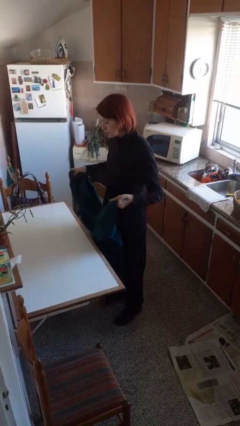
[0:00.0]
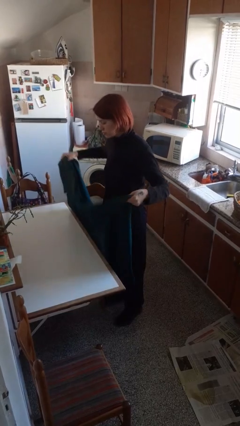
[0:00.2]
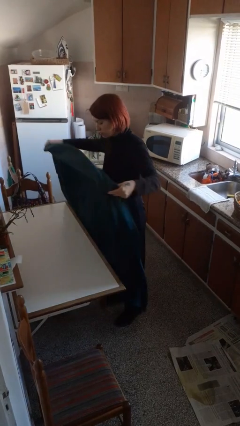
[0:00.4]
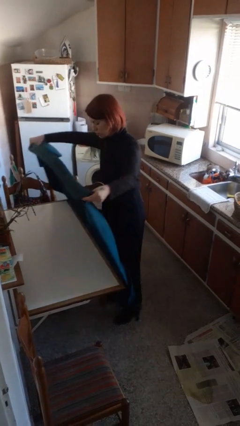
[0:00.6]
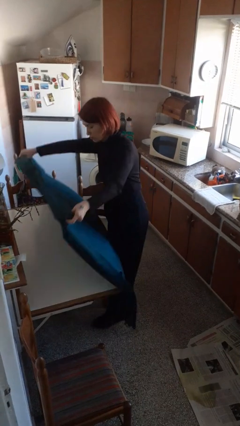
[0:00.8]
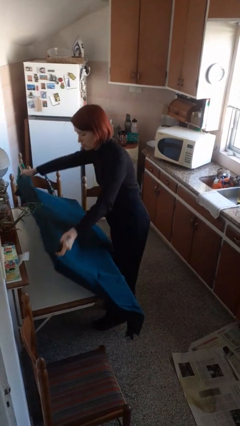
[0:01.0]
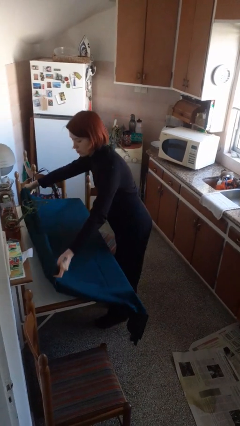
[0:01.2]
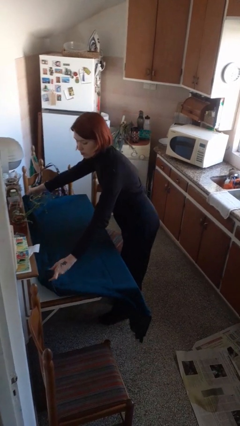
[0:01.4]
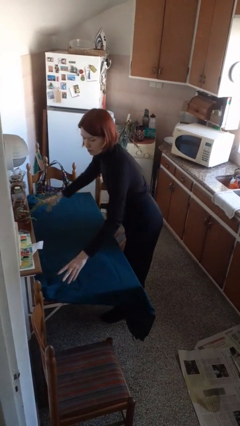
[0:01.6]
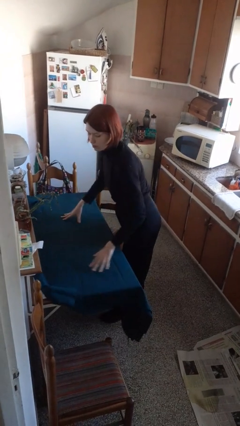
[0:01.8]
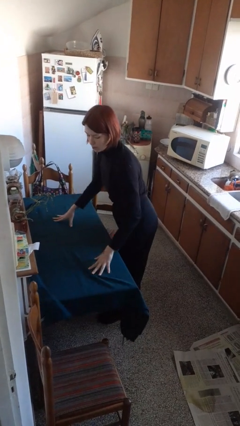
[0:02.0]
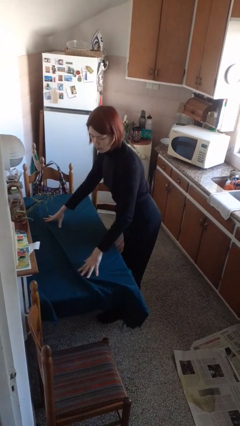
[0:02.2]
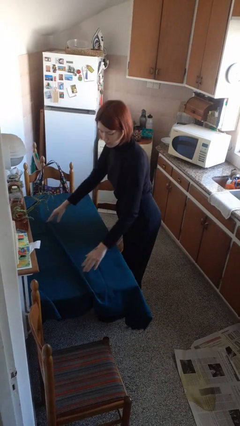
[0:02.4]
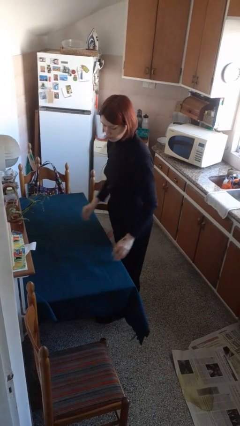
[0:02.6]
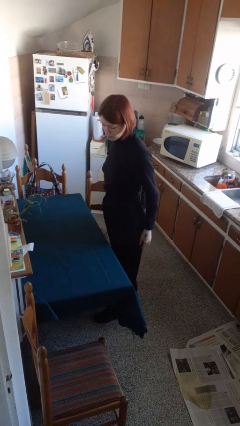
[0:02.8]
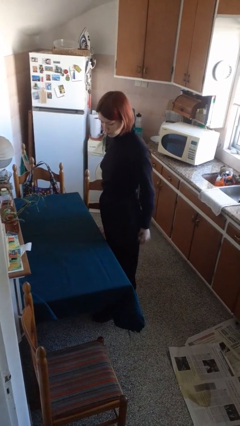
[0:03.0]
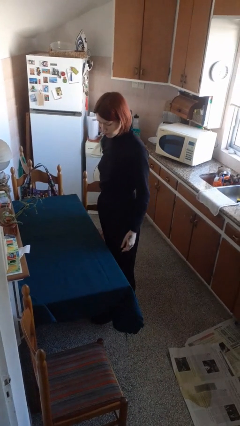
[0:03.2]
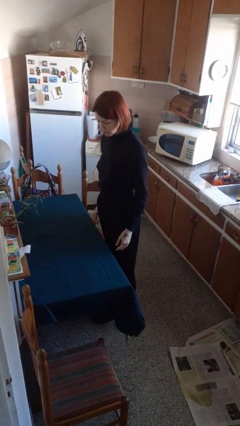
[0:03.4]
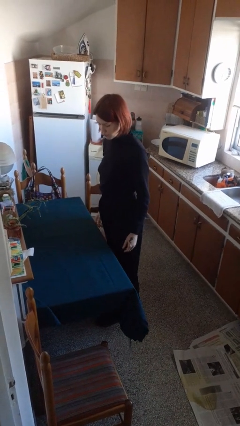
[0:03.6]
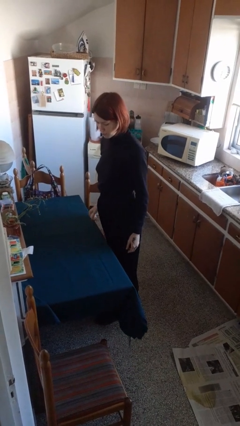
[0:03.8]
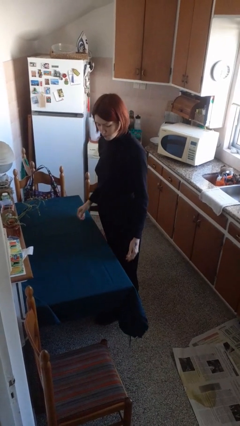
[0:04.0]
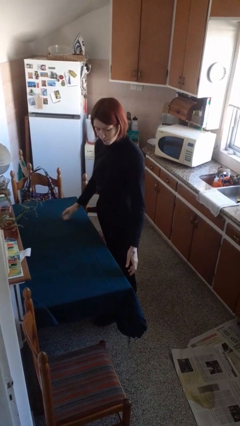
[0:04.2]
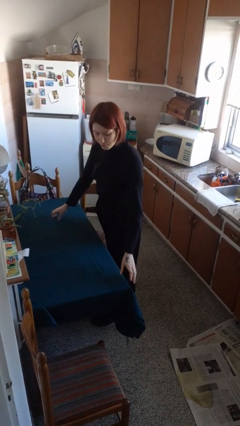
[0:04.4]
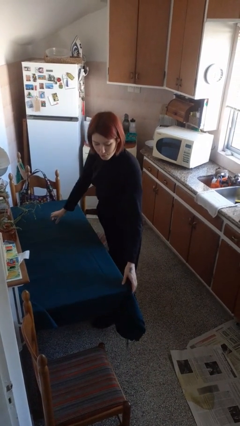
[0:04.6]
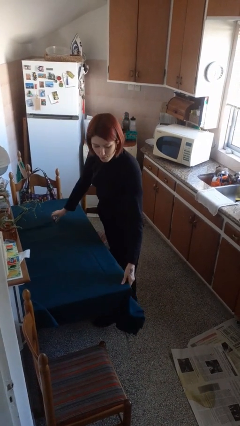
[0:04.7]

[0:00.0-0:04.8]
person spreads tablecloth

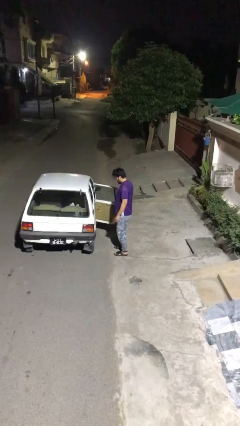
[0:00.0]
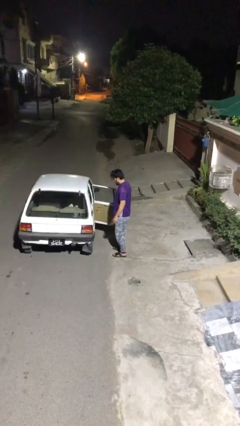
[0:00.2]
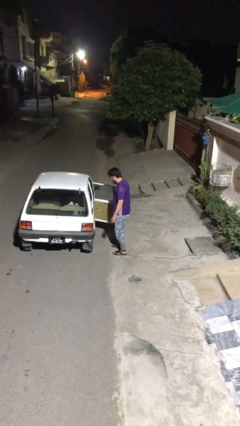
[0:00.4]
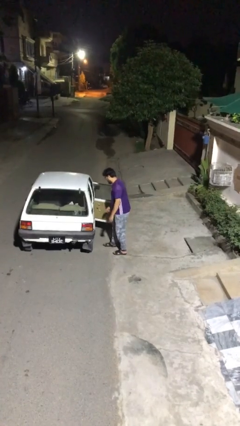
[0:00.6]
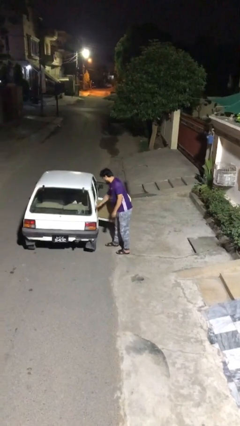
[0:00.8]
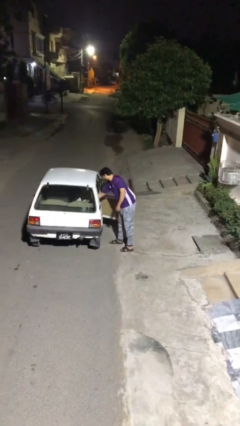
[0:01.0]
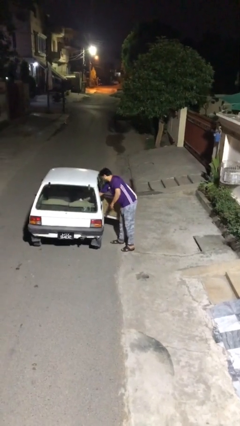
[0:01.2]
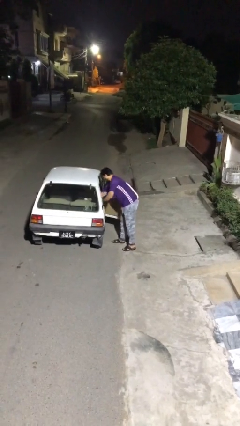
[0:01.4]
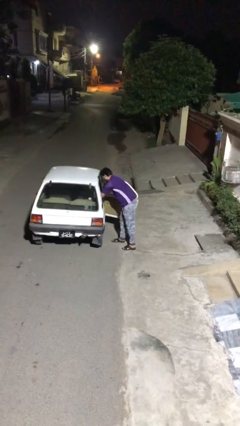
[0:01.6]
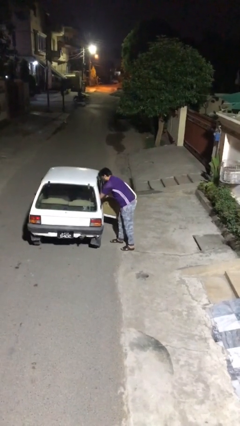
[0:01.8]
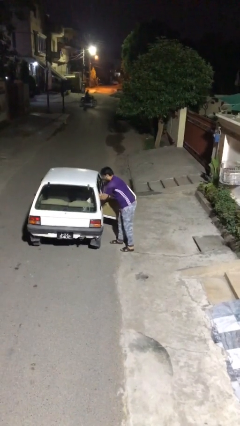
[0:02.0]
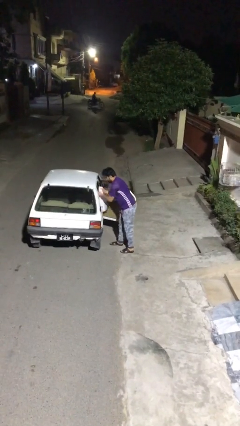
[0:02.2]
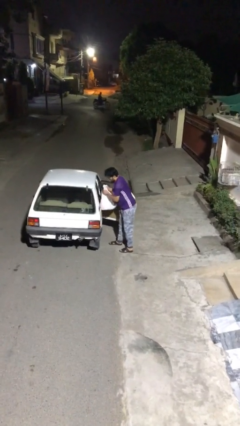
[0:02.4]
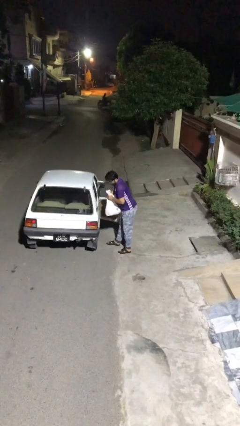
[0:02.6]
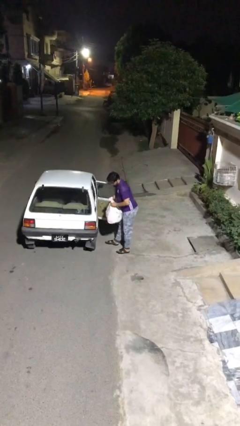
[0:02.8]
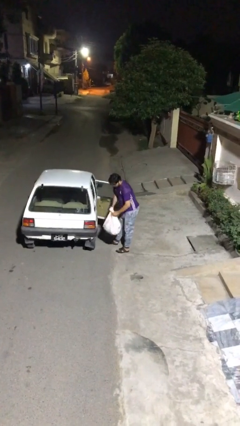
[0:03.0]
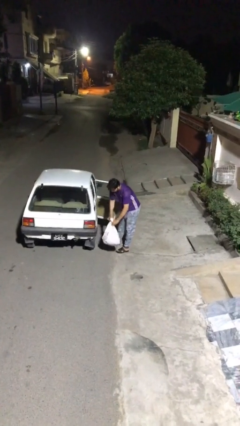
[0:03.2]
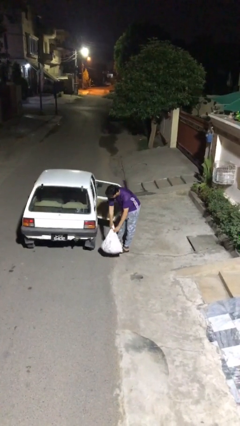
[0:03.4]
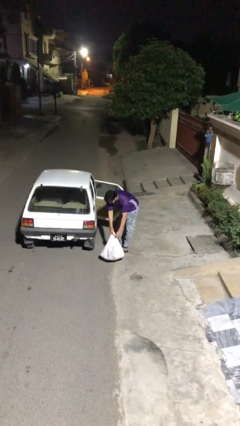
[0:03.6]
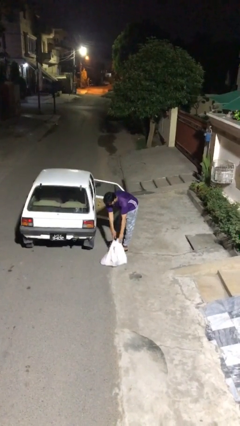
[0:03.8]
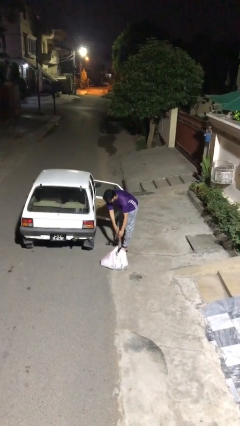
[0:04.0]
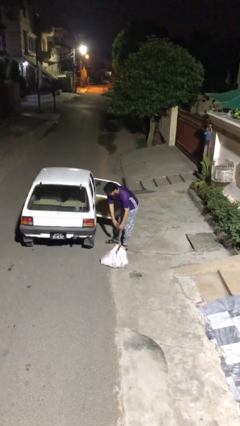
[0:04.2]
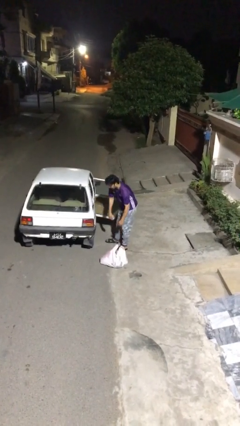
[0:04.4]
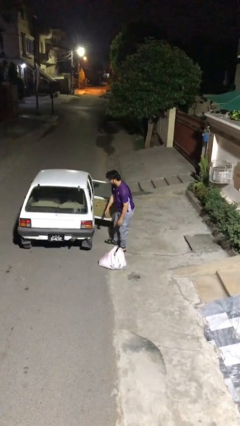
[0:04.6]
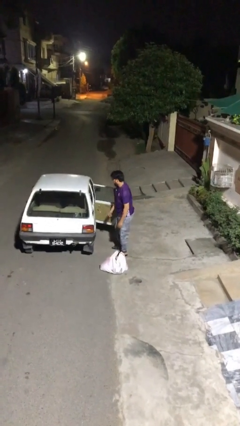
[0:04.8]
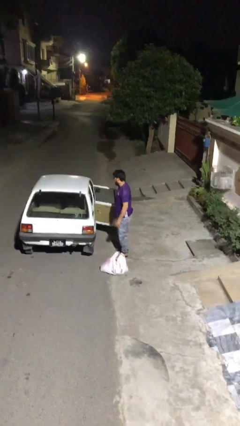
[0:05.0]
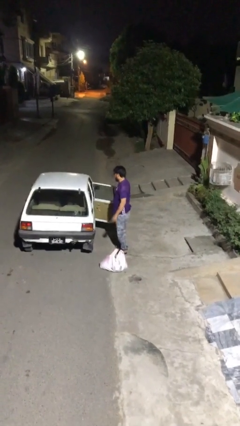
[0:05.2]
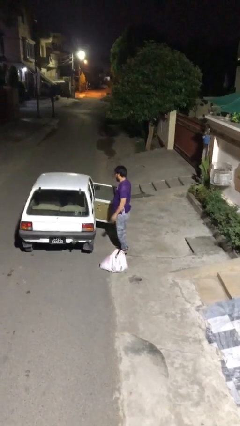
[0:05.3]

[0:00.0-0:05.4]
person unloads car

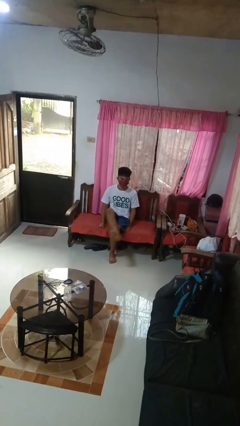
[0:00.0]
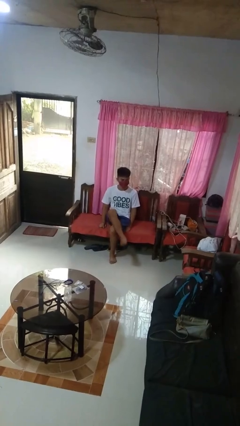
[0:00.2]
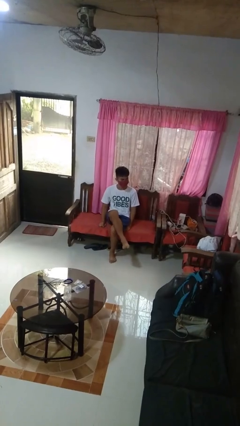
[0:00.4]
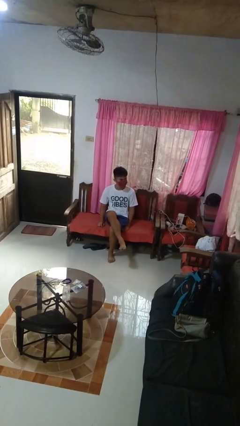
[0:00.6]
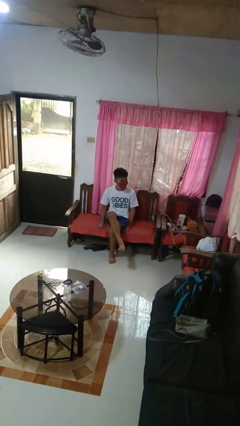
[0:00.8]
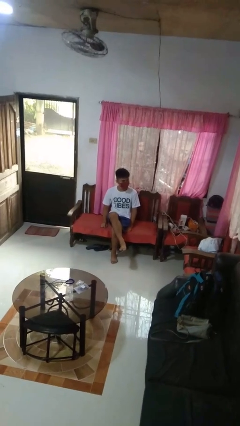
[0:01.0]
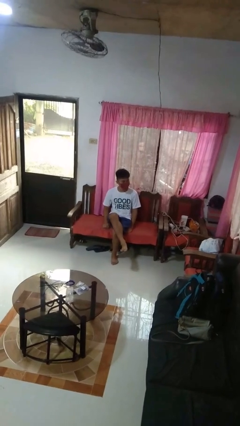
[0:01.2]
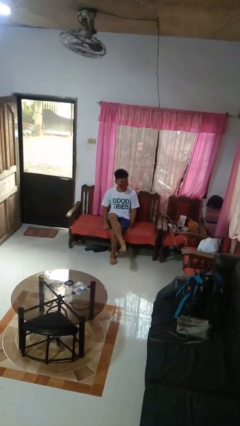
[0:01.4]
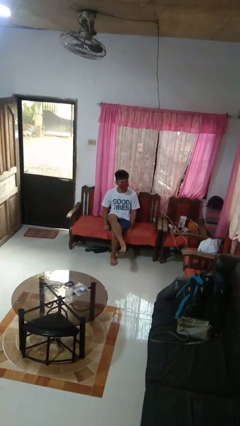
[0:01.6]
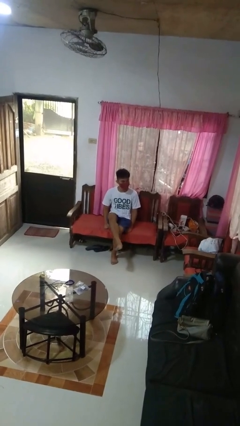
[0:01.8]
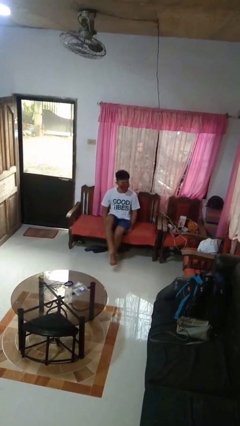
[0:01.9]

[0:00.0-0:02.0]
person crosses legs

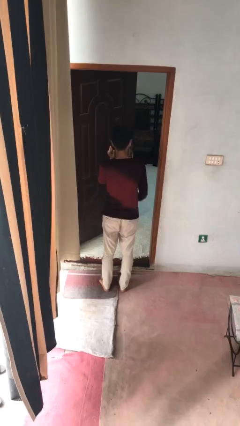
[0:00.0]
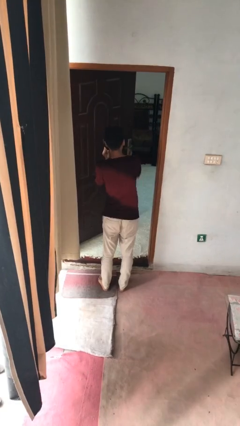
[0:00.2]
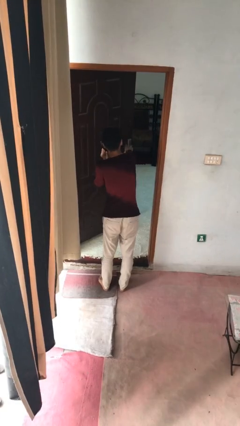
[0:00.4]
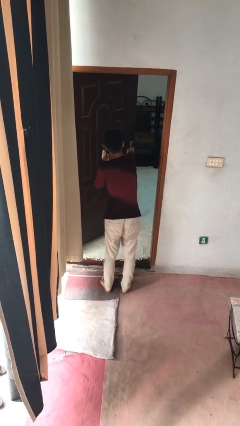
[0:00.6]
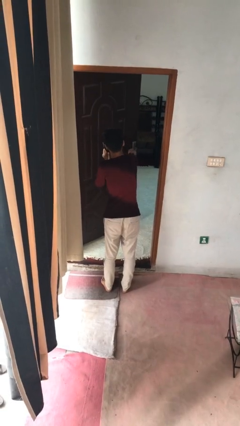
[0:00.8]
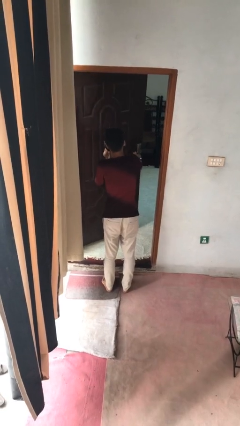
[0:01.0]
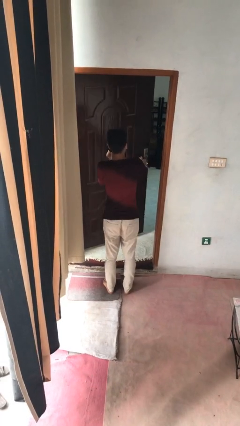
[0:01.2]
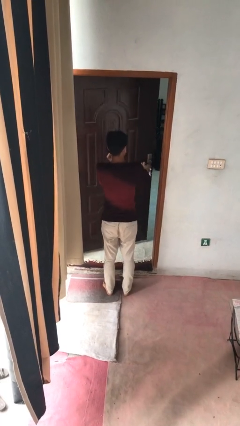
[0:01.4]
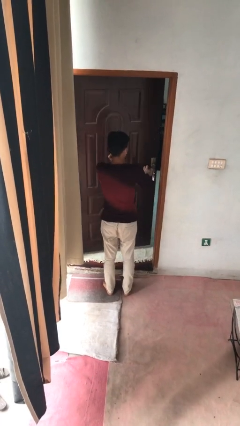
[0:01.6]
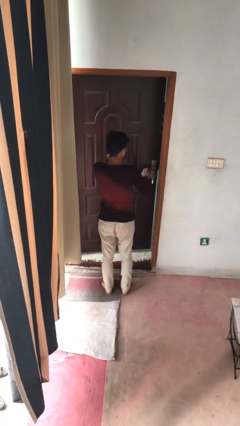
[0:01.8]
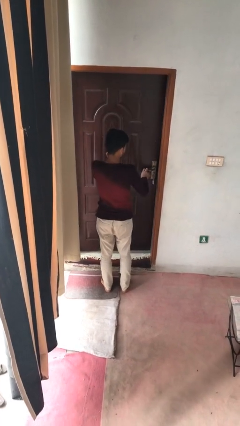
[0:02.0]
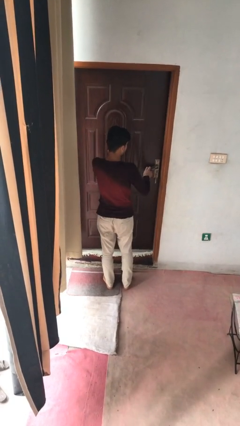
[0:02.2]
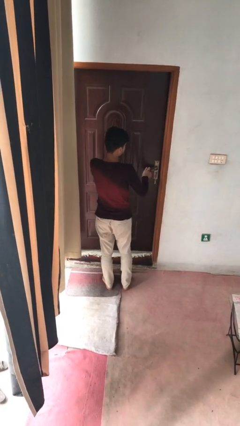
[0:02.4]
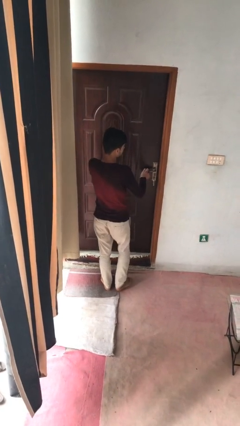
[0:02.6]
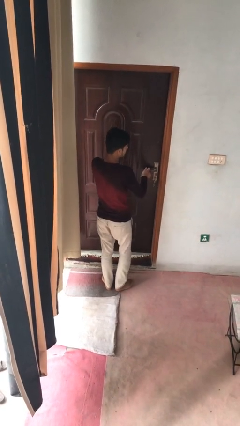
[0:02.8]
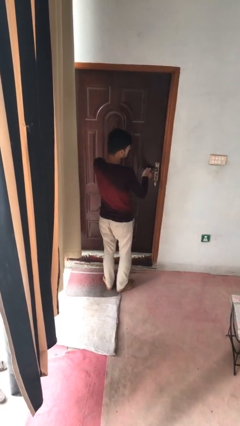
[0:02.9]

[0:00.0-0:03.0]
person closes facility door

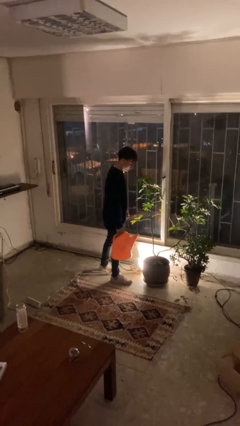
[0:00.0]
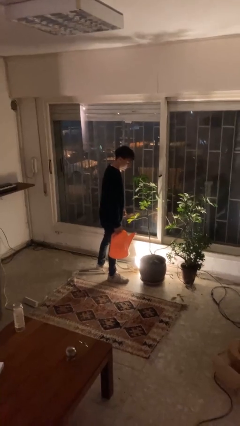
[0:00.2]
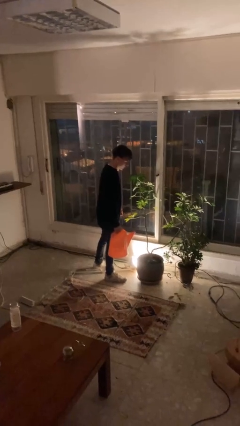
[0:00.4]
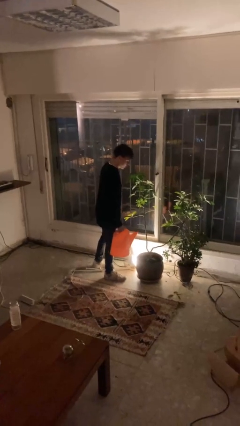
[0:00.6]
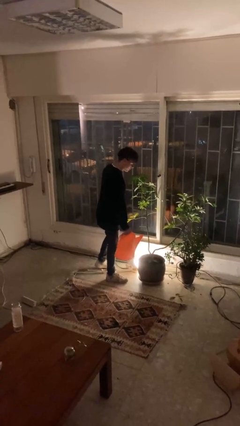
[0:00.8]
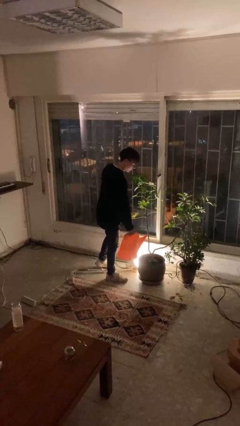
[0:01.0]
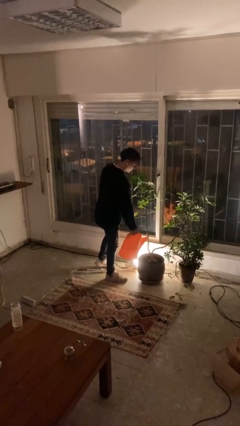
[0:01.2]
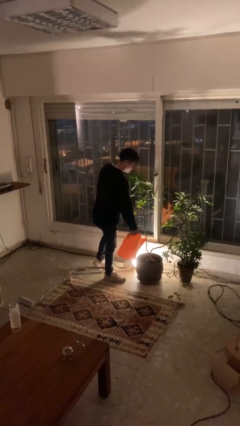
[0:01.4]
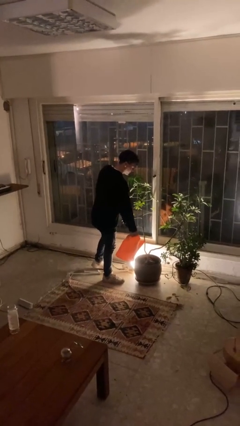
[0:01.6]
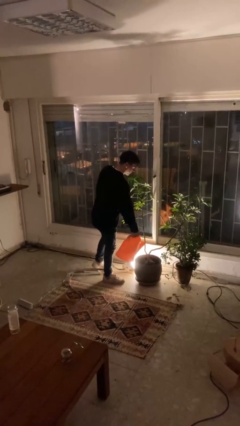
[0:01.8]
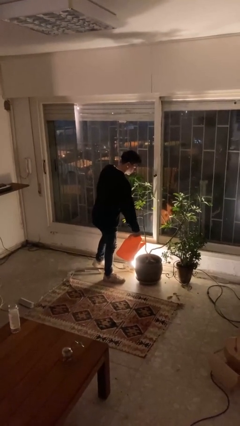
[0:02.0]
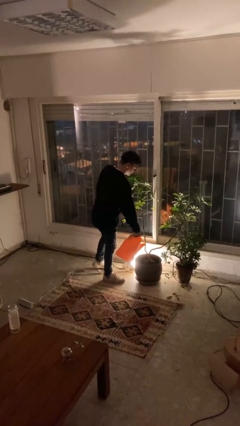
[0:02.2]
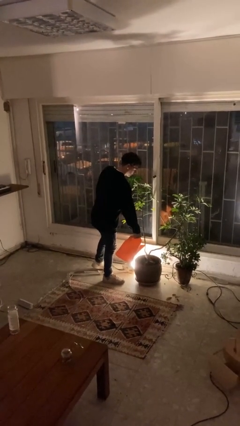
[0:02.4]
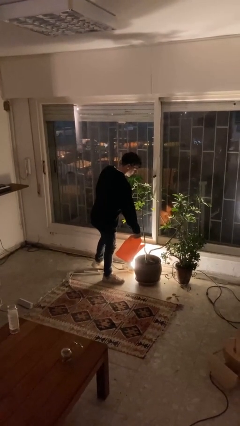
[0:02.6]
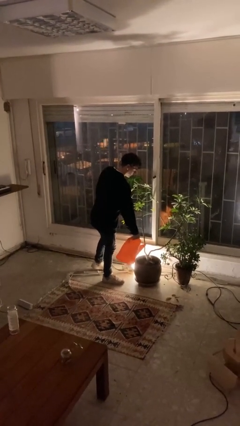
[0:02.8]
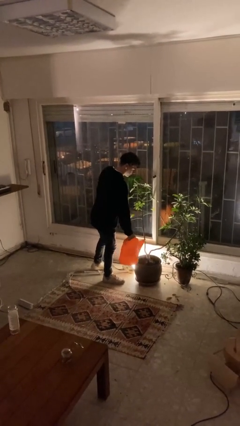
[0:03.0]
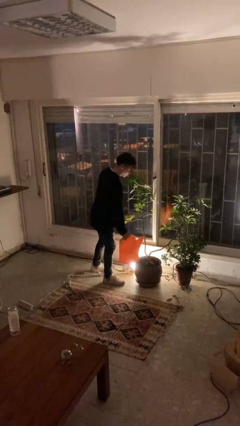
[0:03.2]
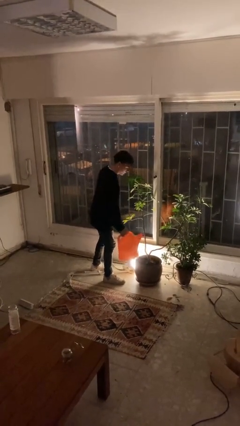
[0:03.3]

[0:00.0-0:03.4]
person waters houseplant
